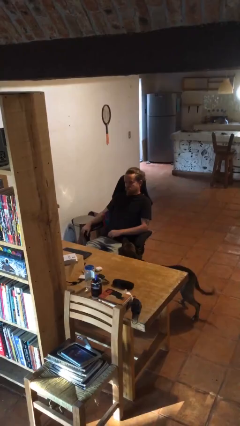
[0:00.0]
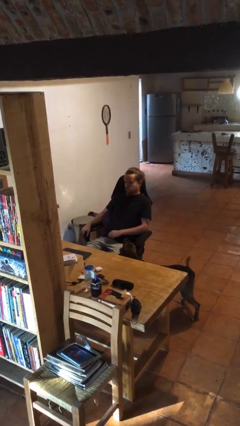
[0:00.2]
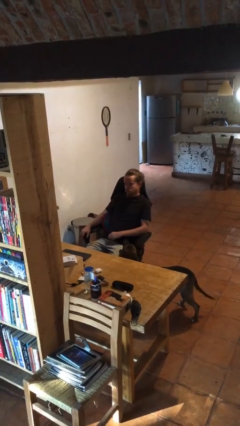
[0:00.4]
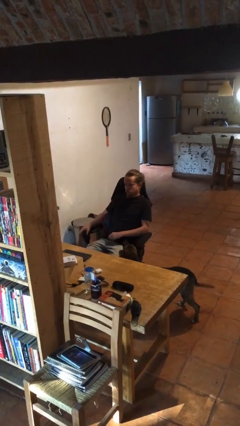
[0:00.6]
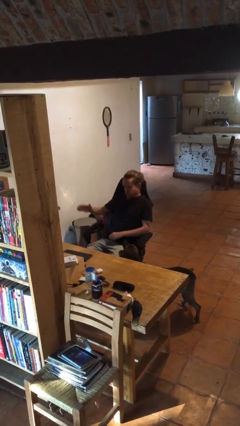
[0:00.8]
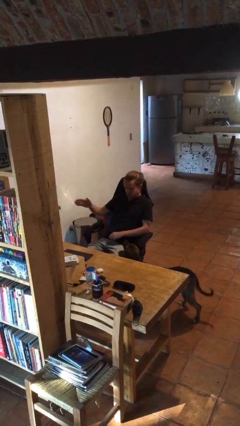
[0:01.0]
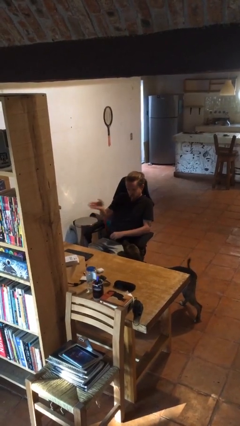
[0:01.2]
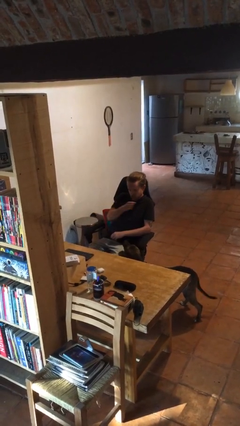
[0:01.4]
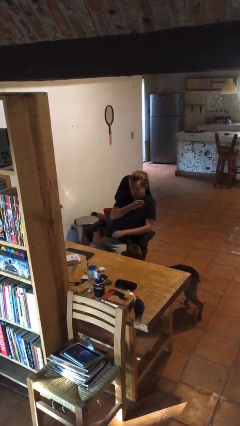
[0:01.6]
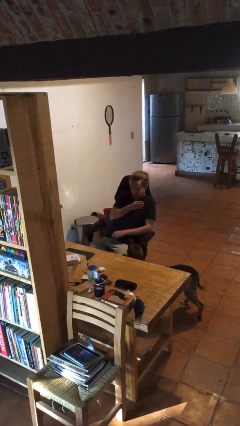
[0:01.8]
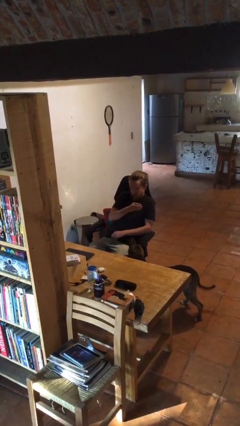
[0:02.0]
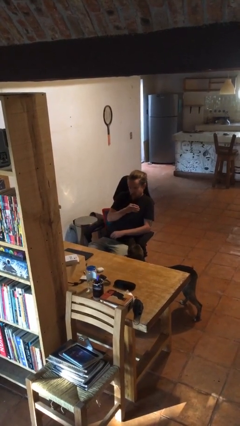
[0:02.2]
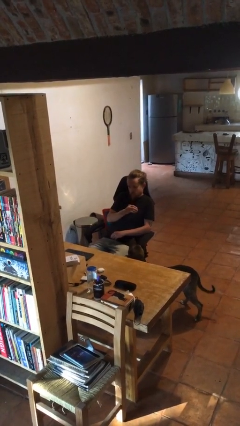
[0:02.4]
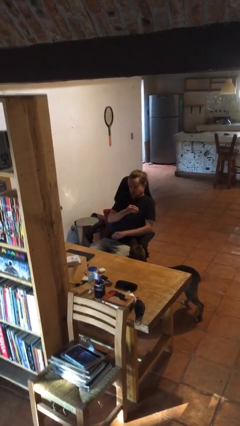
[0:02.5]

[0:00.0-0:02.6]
person gestures swipe left

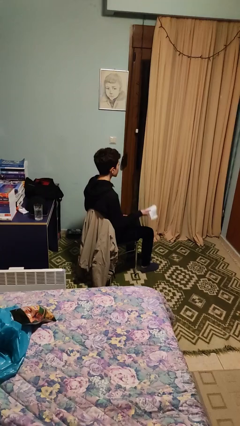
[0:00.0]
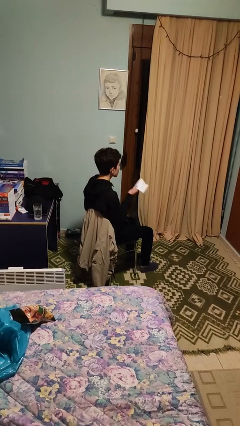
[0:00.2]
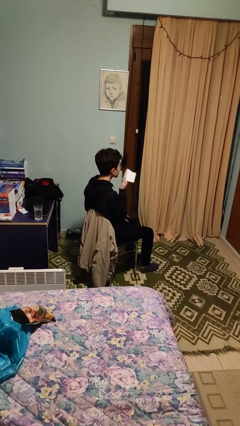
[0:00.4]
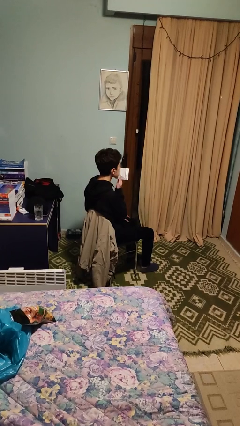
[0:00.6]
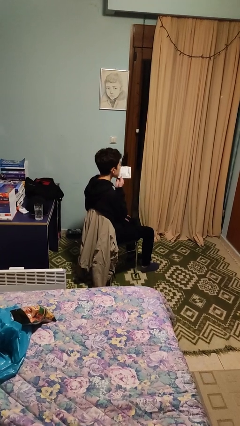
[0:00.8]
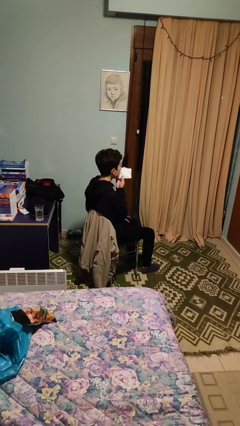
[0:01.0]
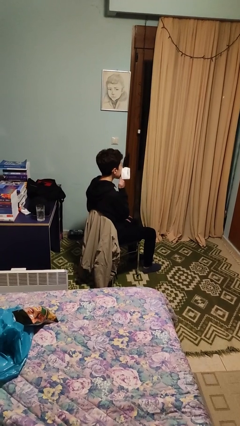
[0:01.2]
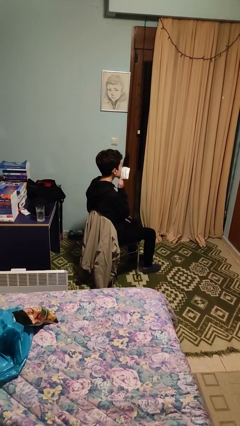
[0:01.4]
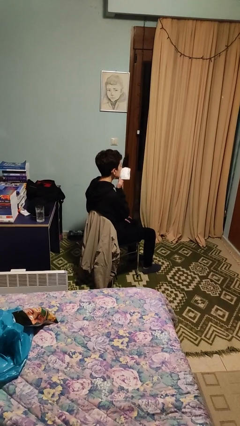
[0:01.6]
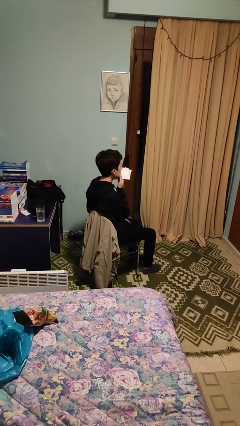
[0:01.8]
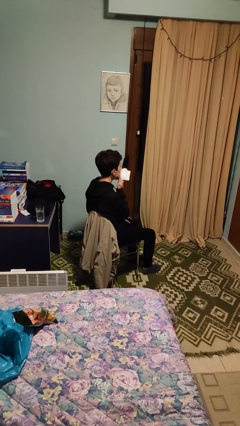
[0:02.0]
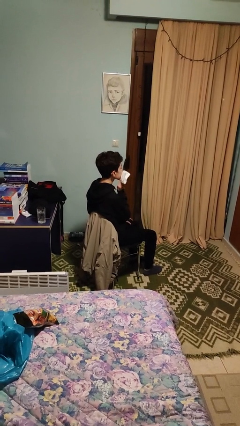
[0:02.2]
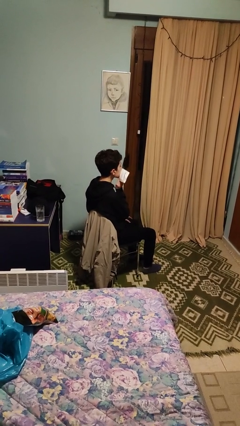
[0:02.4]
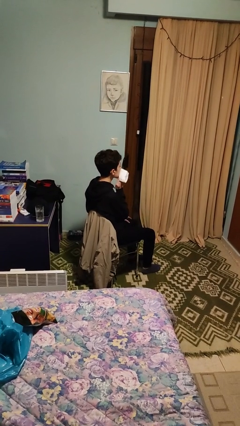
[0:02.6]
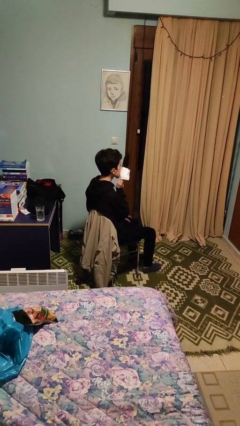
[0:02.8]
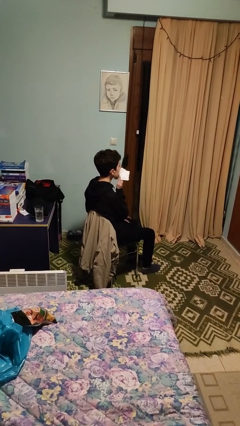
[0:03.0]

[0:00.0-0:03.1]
person wipes mouth with napkin

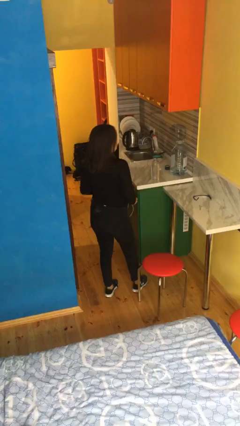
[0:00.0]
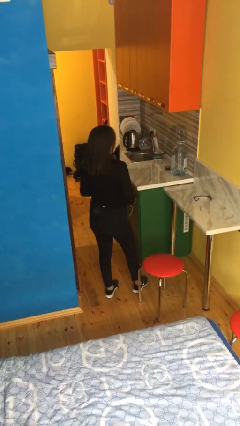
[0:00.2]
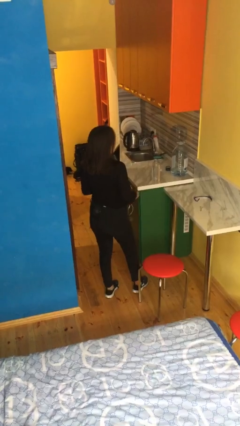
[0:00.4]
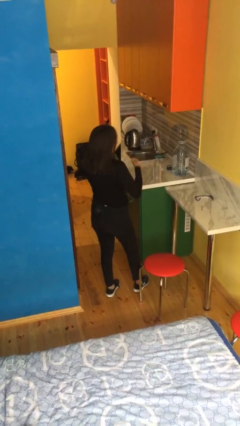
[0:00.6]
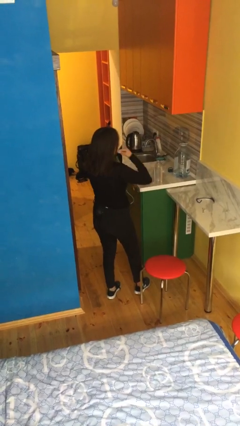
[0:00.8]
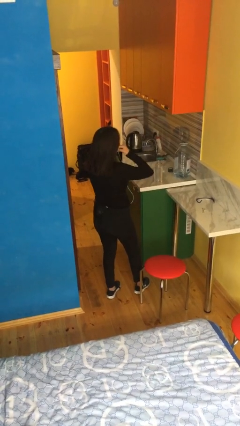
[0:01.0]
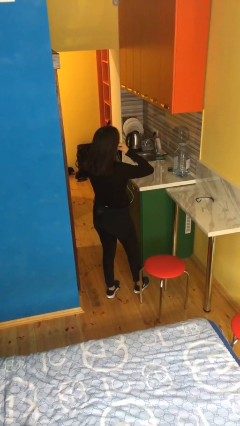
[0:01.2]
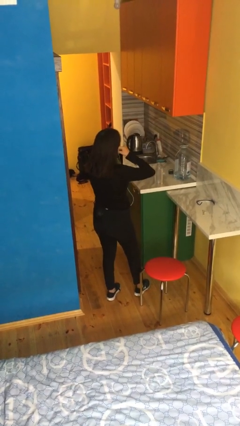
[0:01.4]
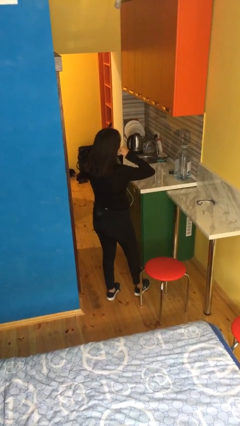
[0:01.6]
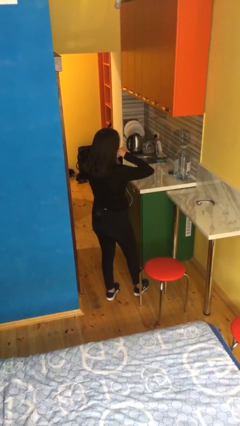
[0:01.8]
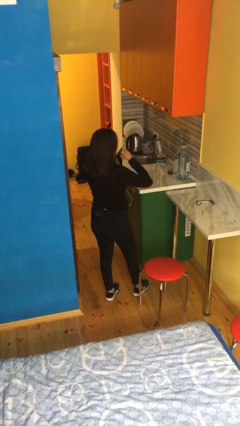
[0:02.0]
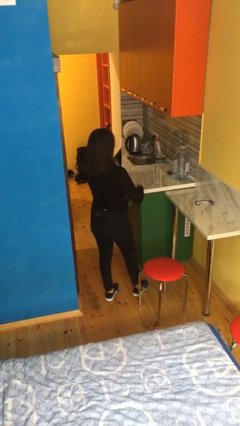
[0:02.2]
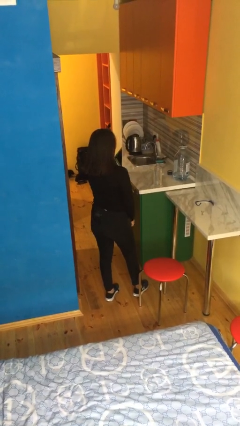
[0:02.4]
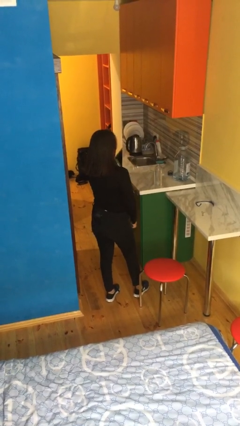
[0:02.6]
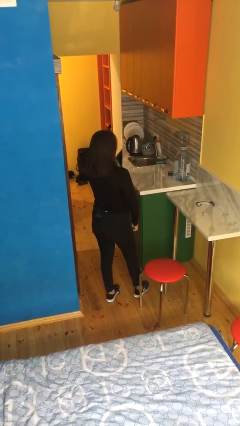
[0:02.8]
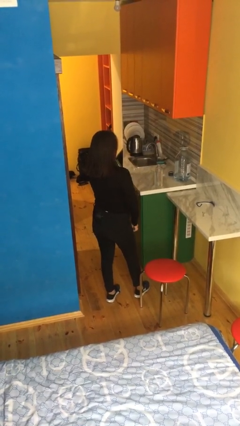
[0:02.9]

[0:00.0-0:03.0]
person puts on headphones

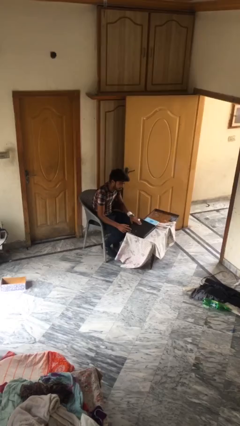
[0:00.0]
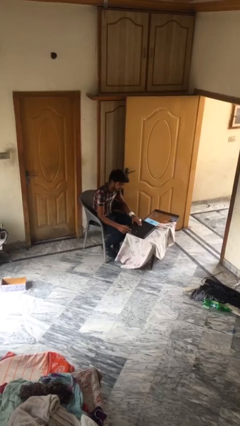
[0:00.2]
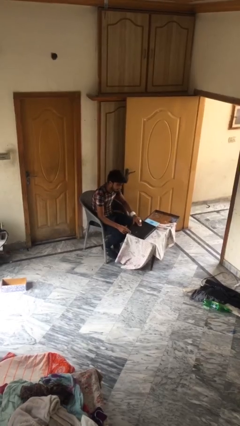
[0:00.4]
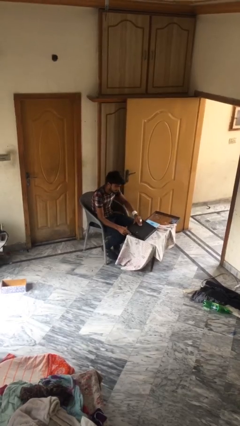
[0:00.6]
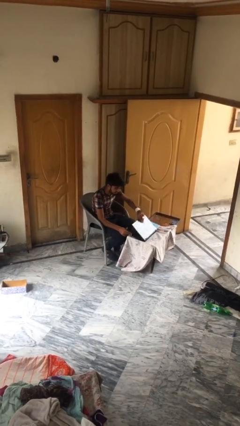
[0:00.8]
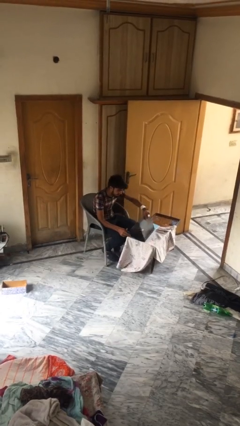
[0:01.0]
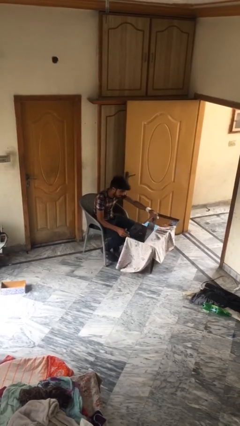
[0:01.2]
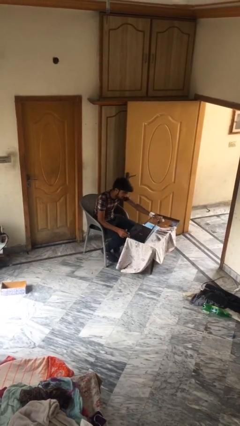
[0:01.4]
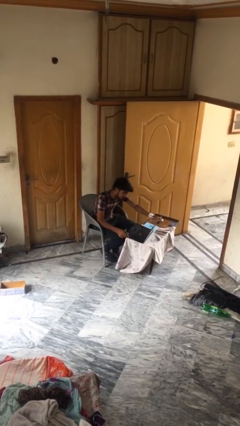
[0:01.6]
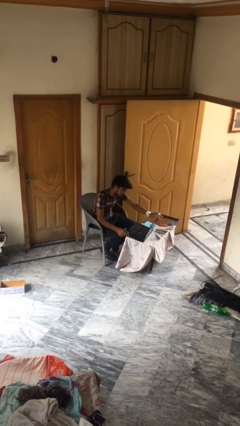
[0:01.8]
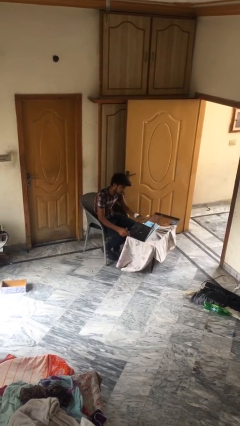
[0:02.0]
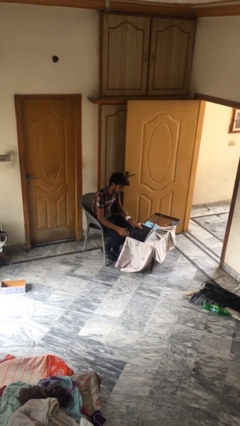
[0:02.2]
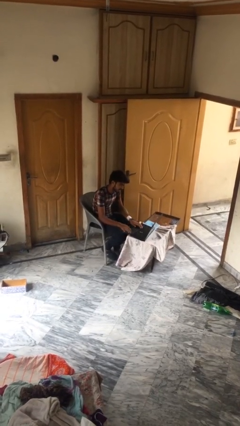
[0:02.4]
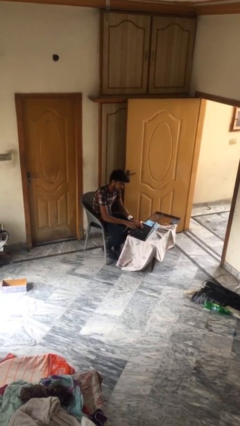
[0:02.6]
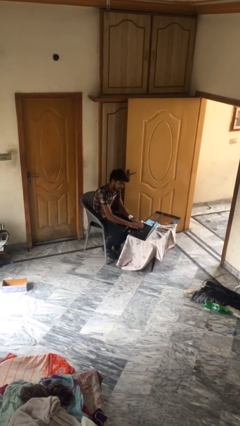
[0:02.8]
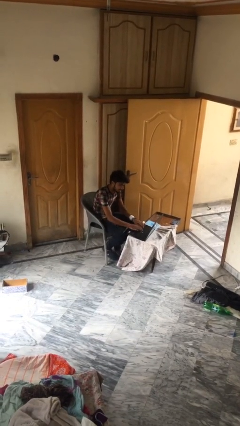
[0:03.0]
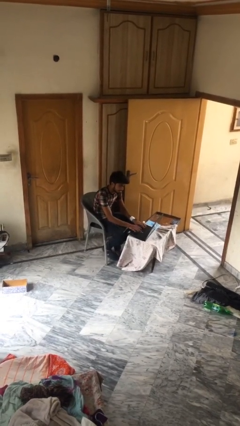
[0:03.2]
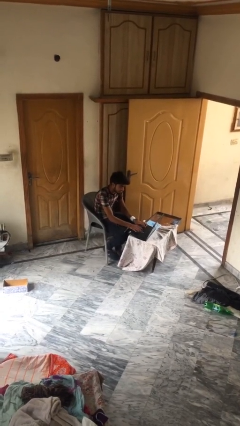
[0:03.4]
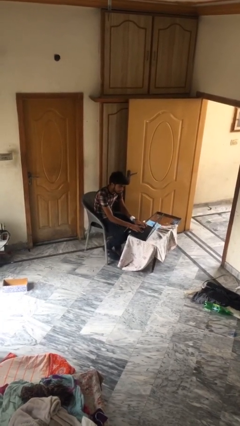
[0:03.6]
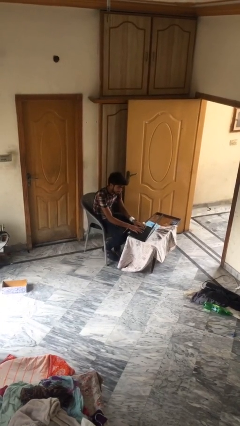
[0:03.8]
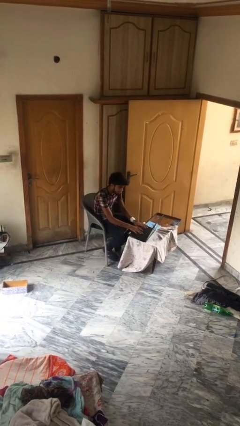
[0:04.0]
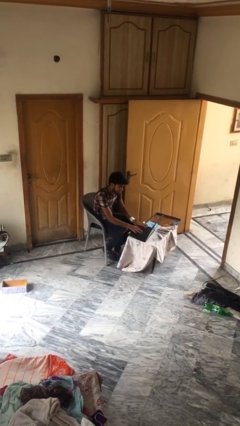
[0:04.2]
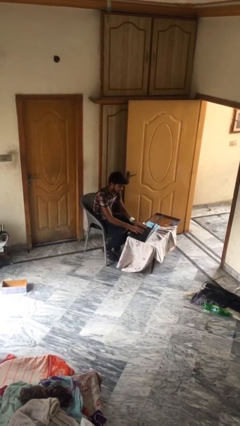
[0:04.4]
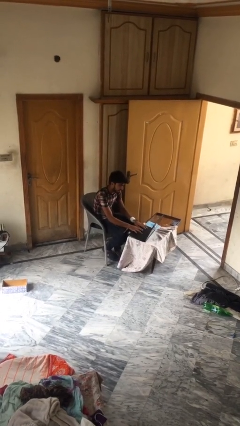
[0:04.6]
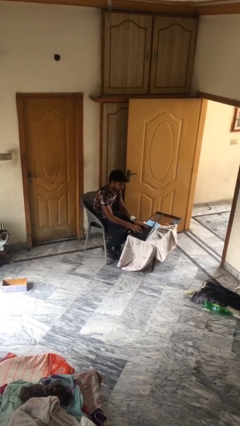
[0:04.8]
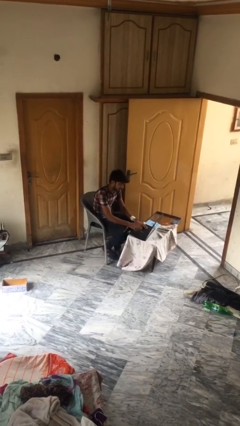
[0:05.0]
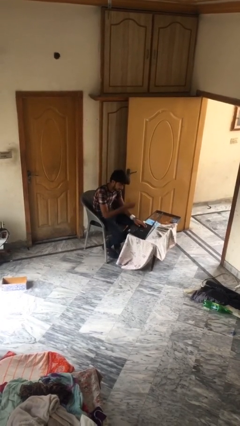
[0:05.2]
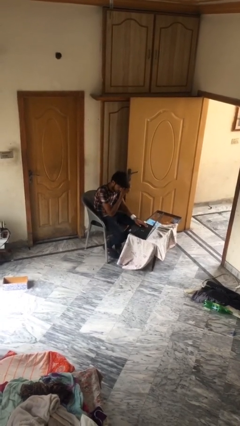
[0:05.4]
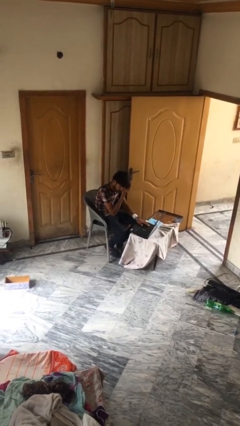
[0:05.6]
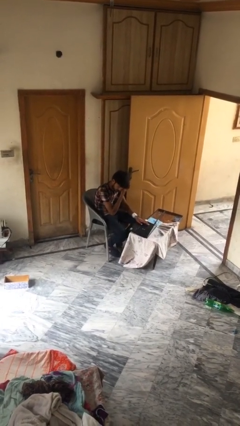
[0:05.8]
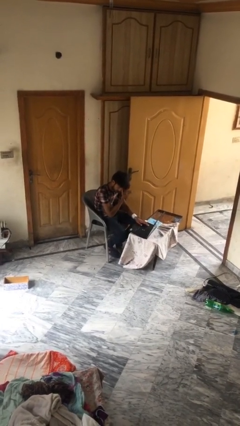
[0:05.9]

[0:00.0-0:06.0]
person interacts with laptop

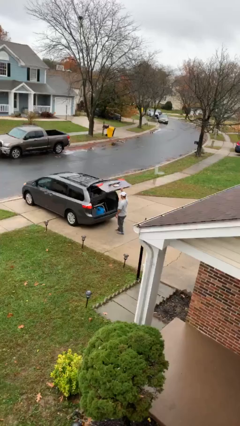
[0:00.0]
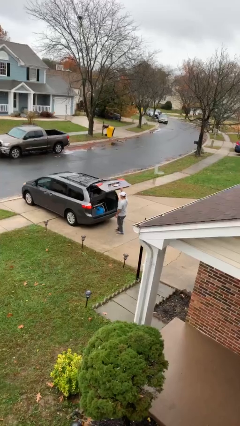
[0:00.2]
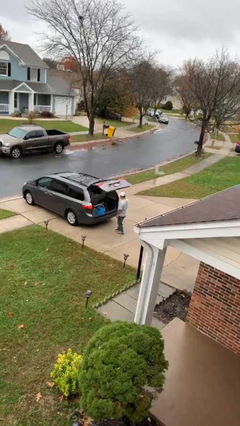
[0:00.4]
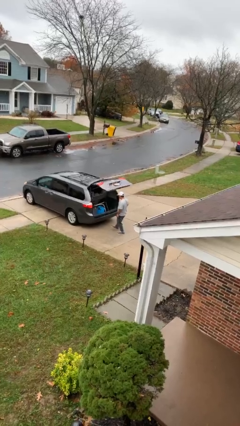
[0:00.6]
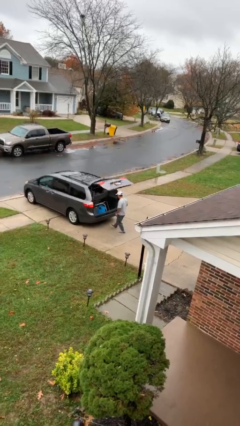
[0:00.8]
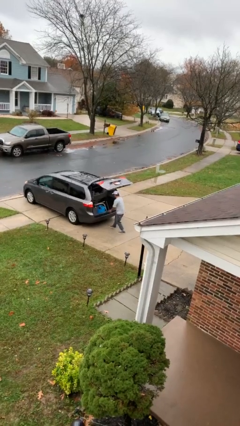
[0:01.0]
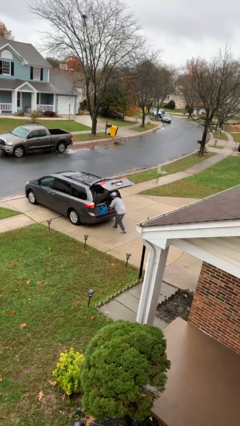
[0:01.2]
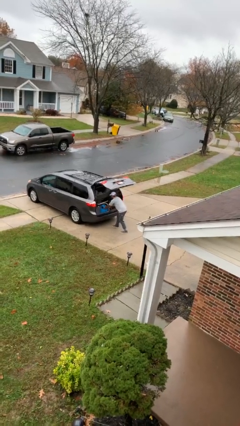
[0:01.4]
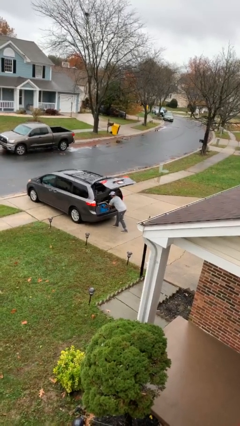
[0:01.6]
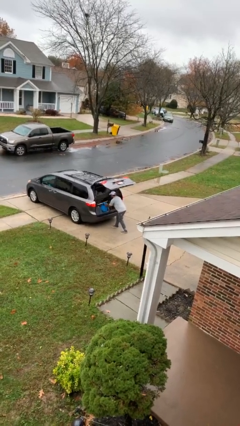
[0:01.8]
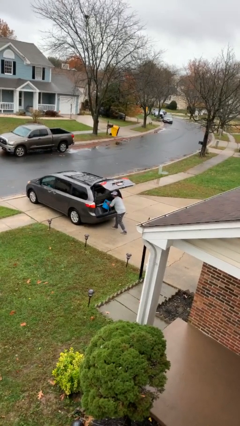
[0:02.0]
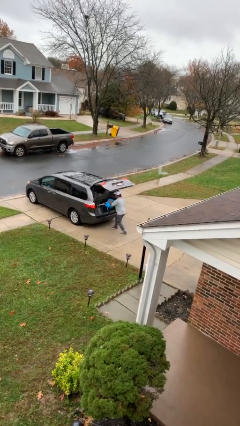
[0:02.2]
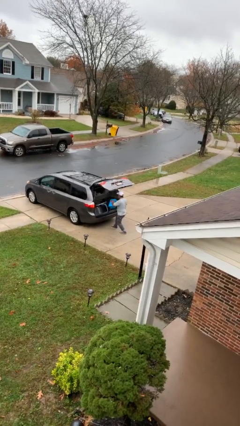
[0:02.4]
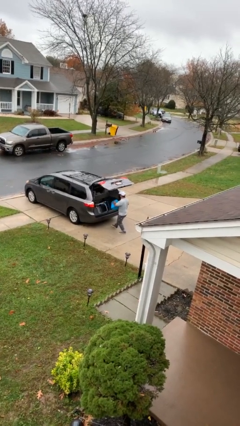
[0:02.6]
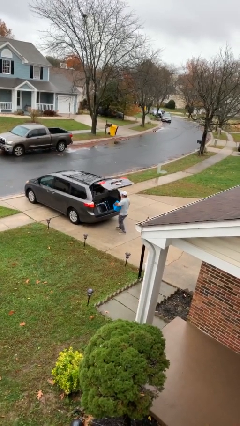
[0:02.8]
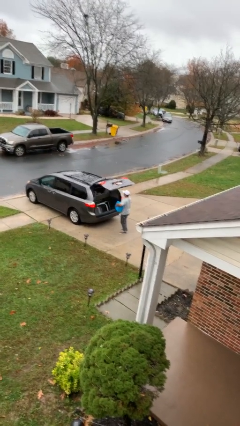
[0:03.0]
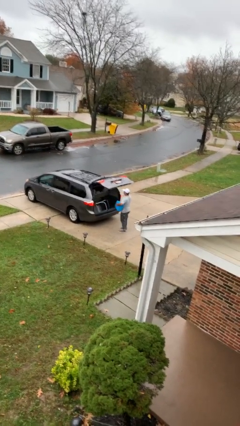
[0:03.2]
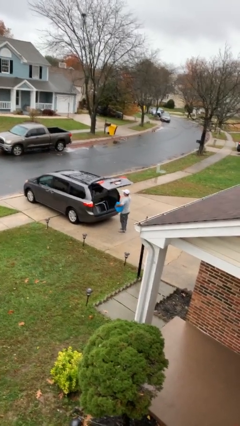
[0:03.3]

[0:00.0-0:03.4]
person unloads car
